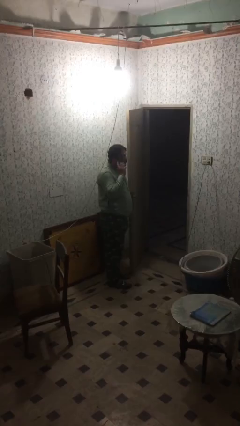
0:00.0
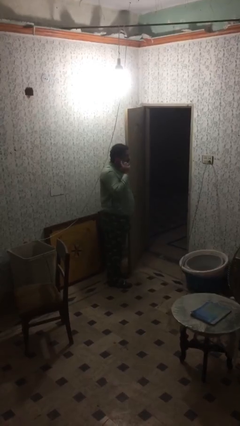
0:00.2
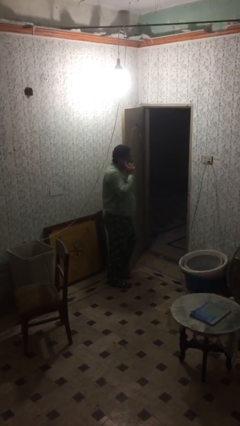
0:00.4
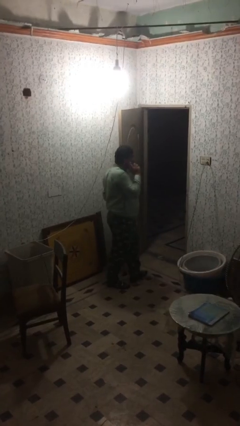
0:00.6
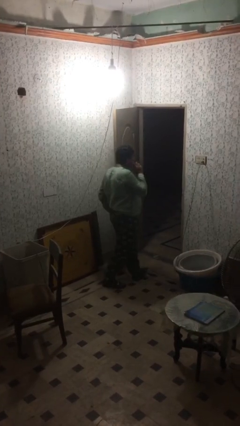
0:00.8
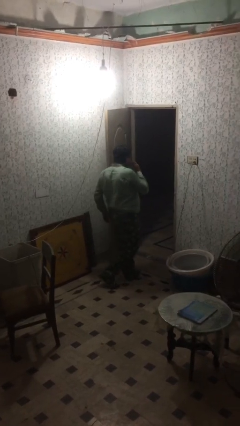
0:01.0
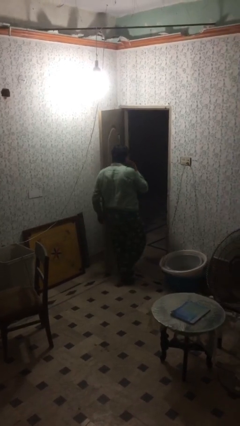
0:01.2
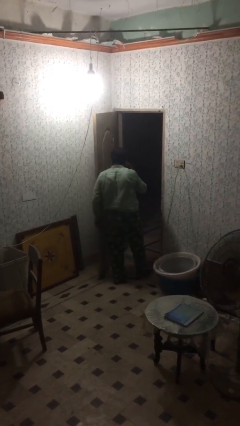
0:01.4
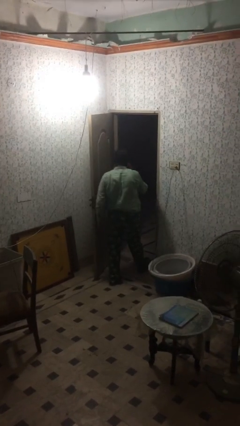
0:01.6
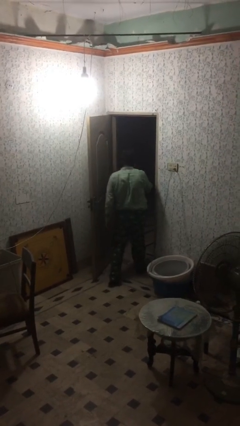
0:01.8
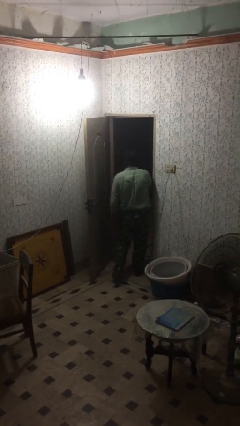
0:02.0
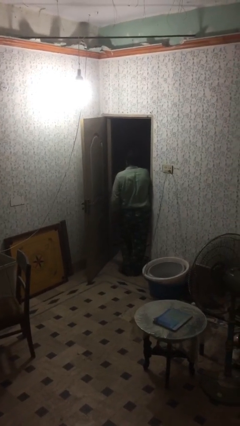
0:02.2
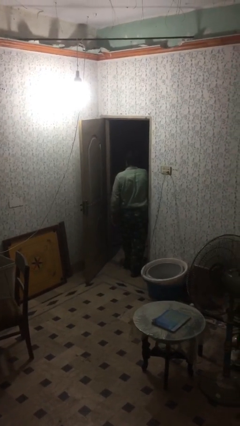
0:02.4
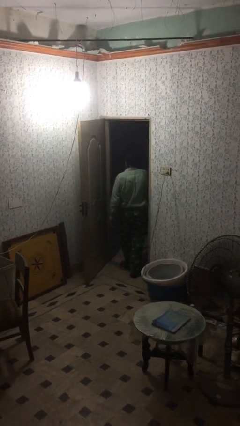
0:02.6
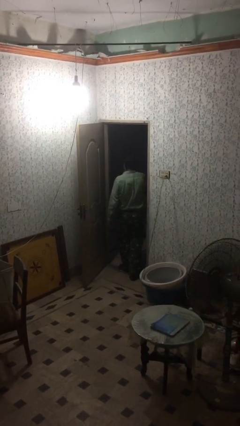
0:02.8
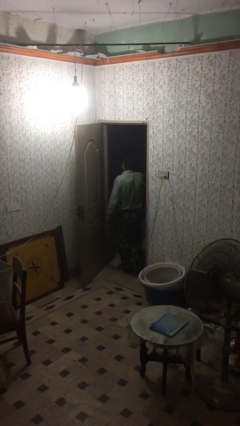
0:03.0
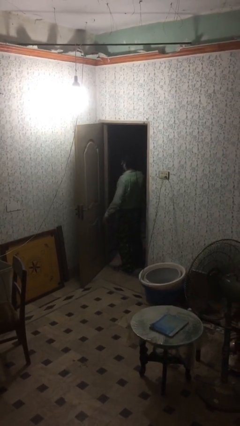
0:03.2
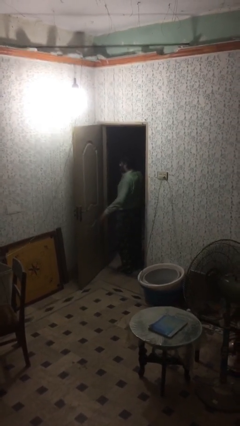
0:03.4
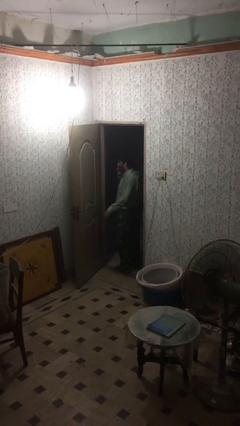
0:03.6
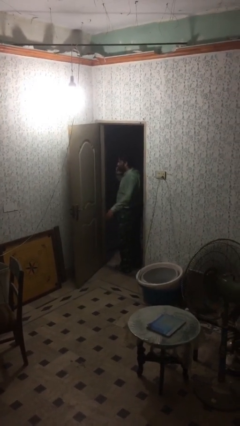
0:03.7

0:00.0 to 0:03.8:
person exits scene through structure

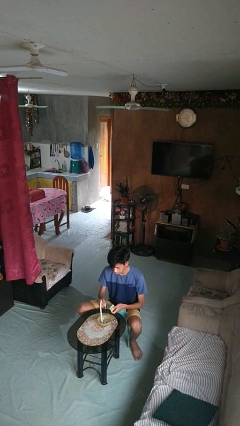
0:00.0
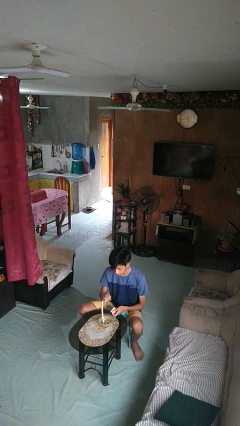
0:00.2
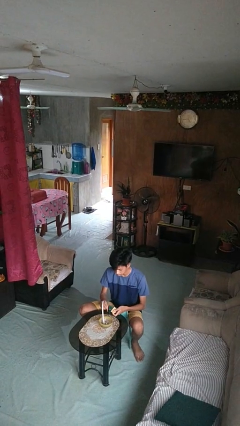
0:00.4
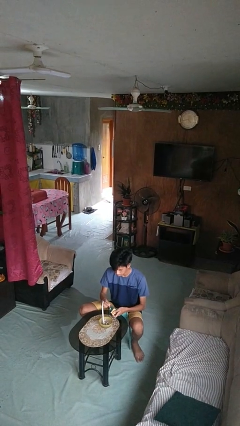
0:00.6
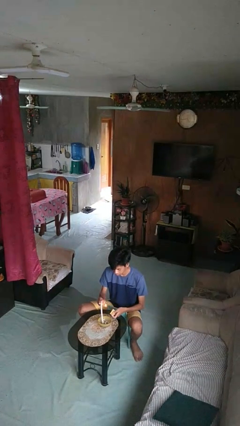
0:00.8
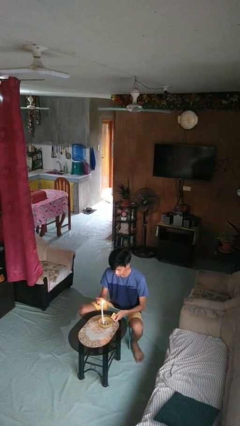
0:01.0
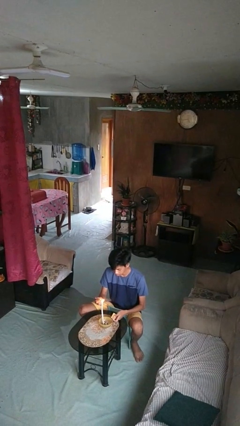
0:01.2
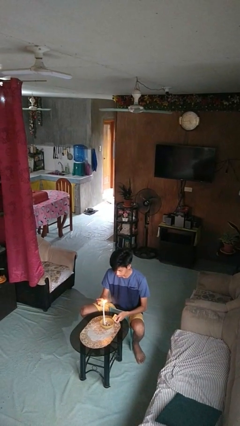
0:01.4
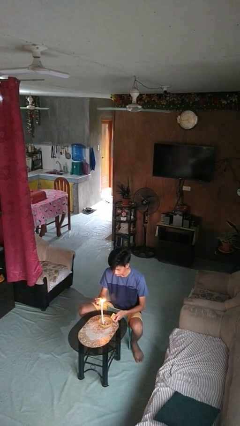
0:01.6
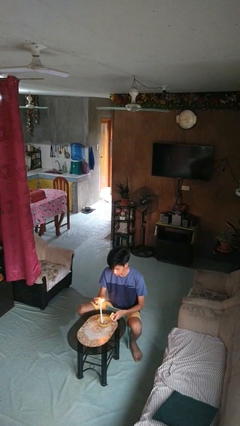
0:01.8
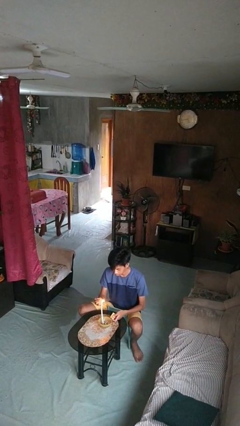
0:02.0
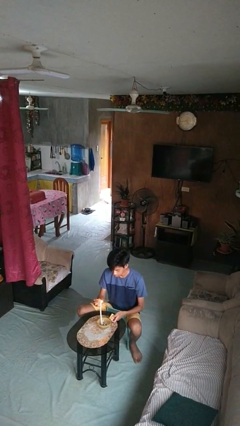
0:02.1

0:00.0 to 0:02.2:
person lights candle

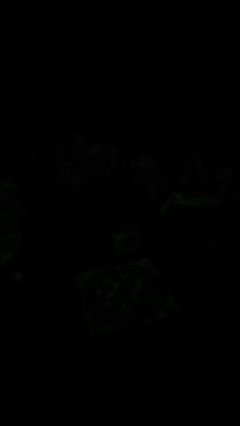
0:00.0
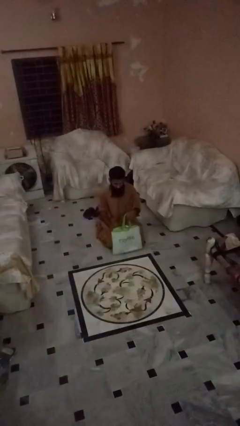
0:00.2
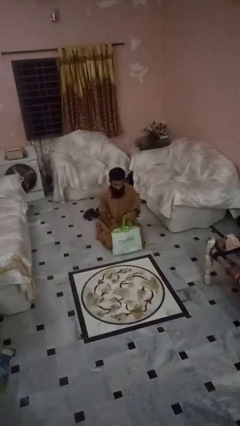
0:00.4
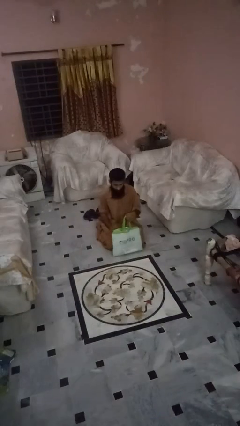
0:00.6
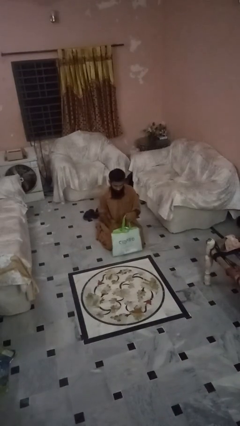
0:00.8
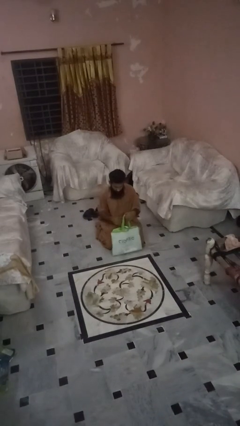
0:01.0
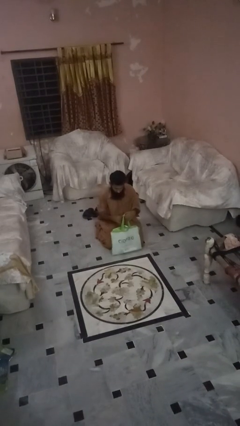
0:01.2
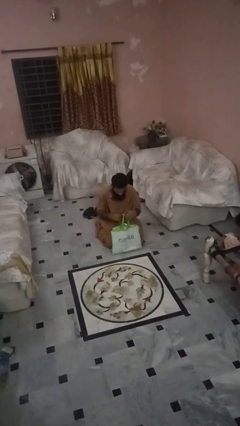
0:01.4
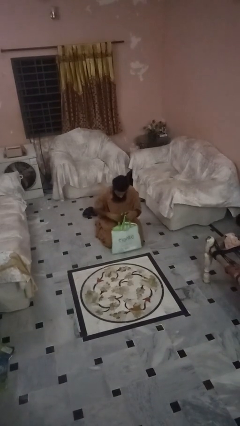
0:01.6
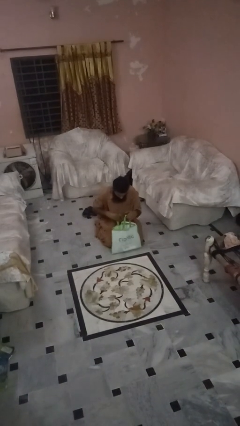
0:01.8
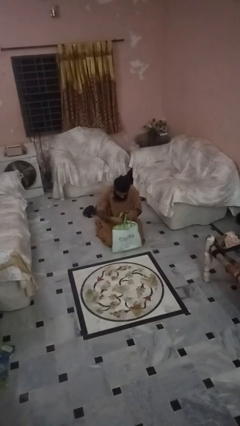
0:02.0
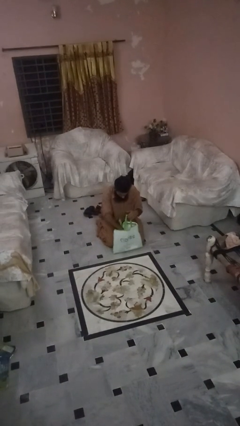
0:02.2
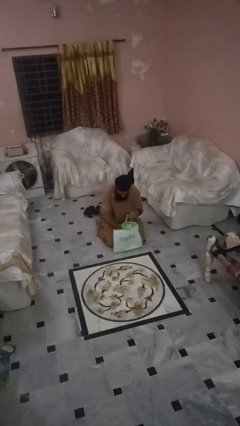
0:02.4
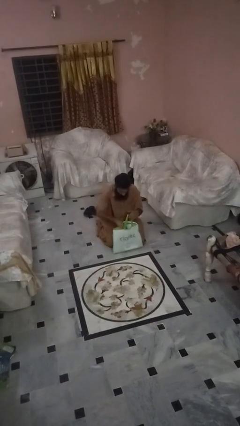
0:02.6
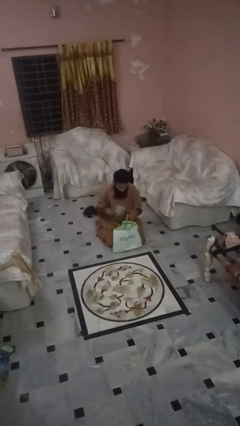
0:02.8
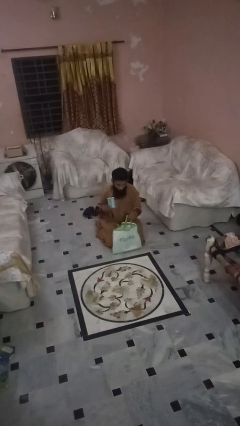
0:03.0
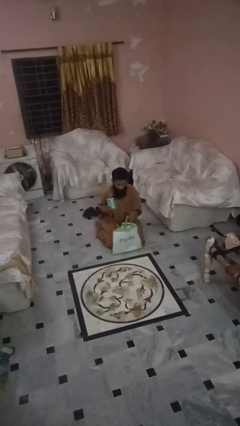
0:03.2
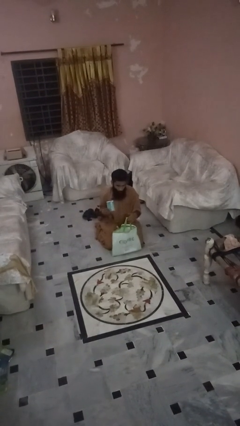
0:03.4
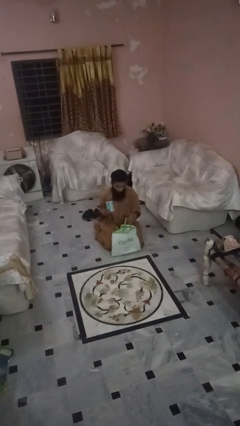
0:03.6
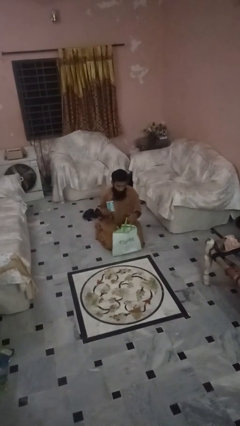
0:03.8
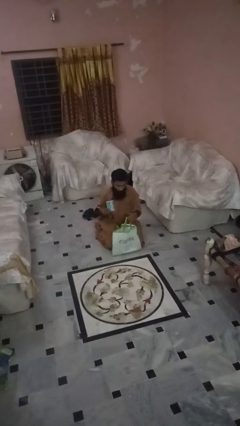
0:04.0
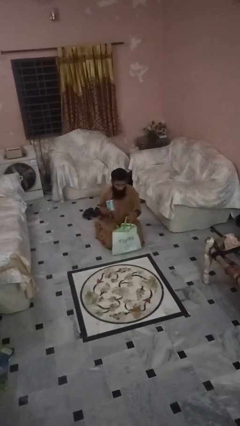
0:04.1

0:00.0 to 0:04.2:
person takes object from bag

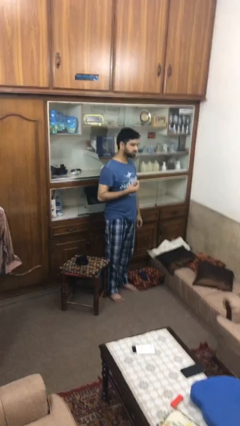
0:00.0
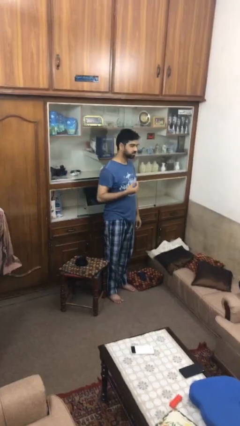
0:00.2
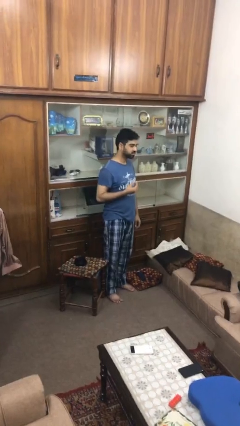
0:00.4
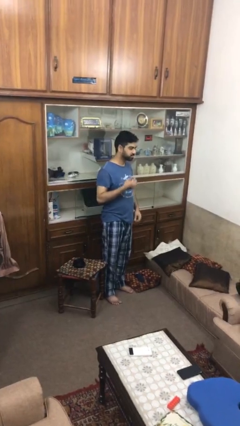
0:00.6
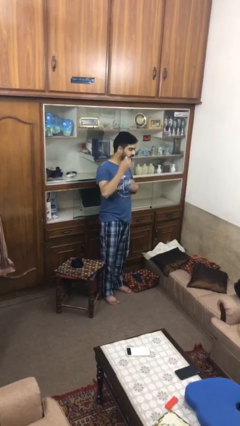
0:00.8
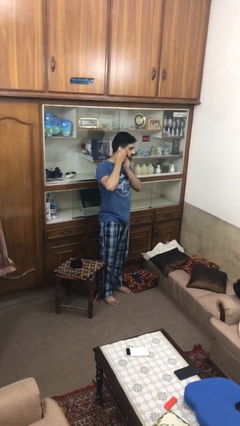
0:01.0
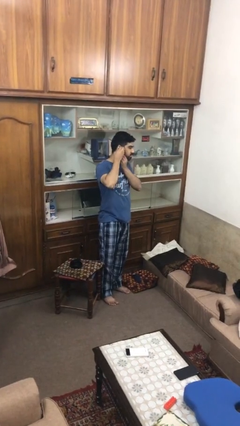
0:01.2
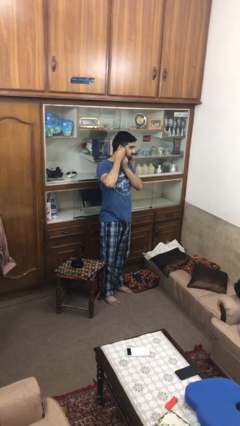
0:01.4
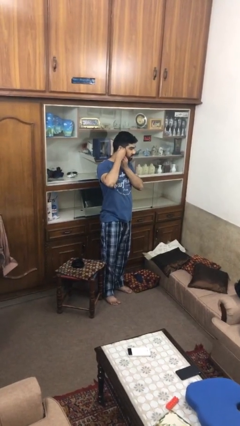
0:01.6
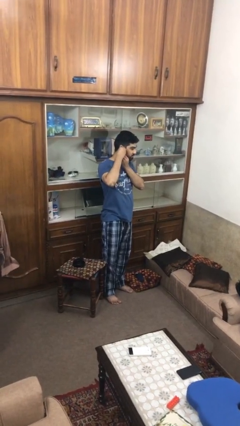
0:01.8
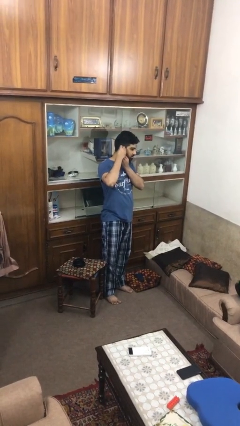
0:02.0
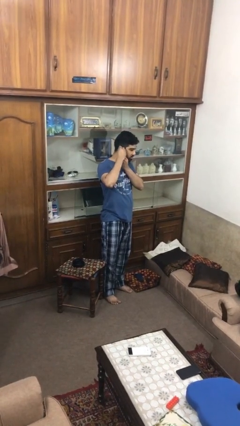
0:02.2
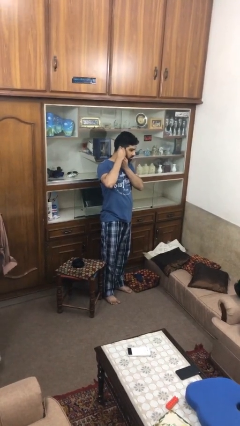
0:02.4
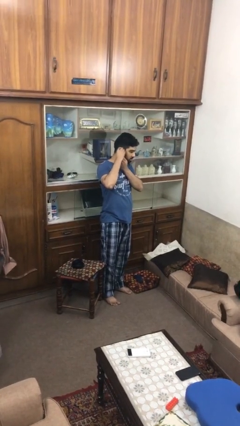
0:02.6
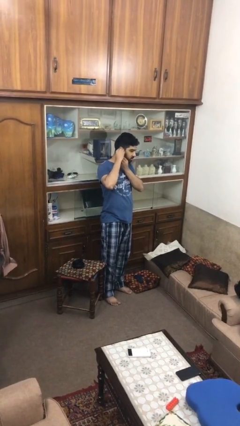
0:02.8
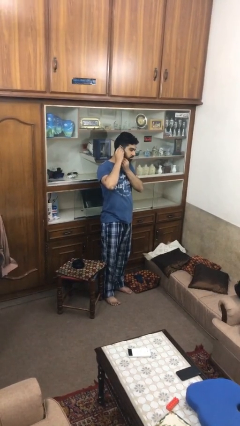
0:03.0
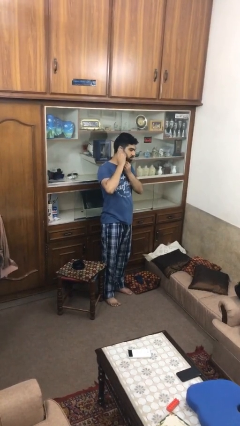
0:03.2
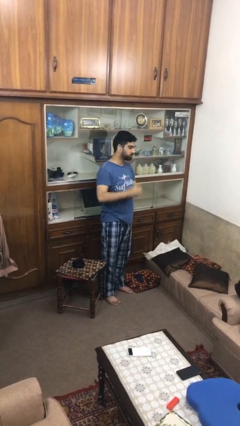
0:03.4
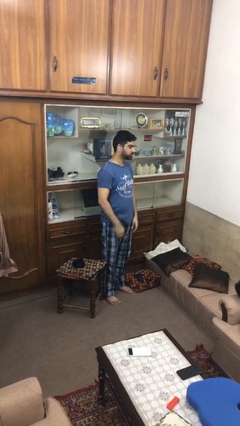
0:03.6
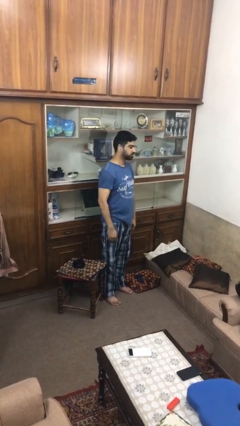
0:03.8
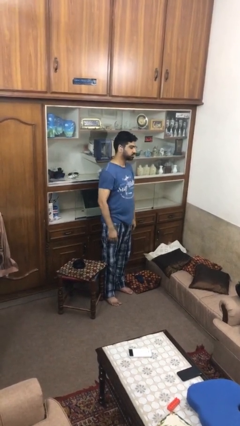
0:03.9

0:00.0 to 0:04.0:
person puts on earrings

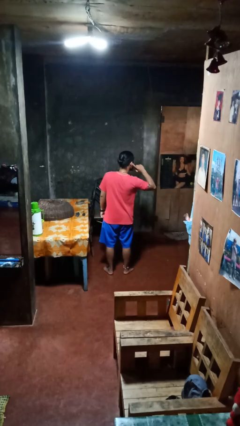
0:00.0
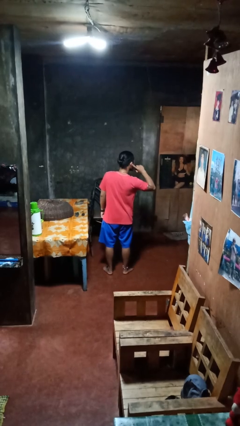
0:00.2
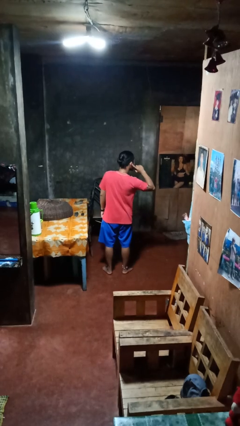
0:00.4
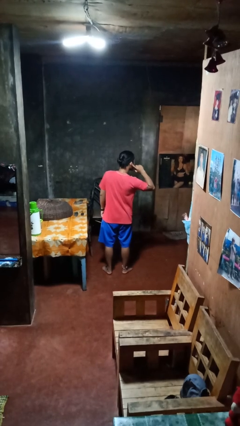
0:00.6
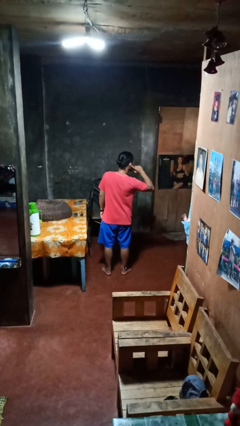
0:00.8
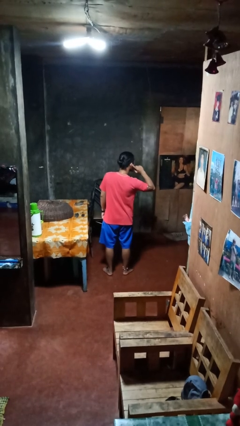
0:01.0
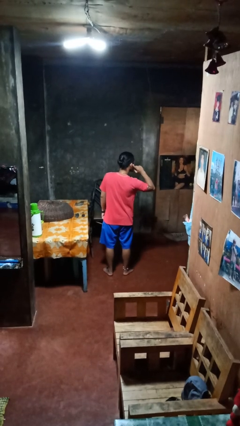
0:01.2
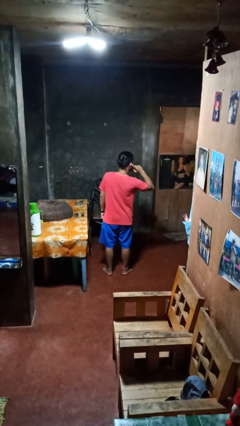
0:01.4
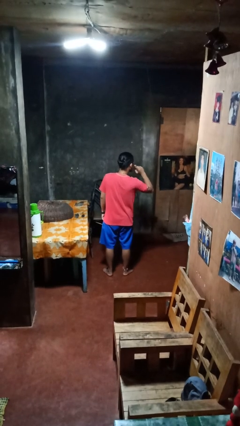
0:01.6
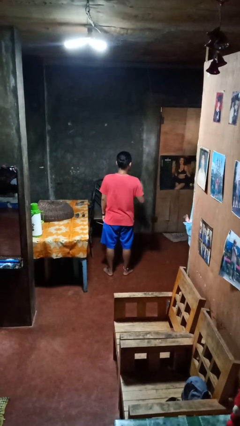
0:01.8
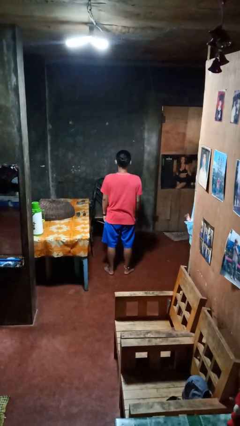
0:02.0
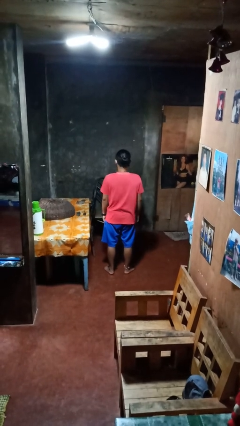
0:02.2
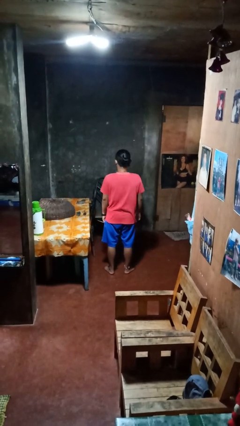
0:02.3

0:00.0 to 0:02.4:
person gestures listen closely

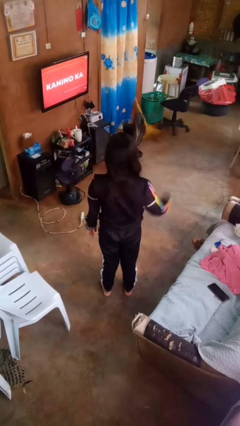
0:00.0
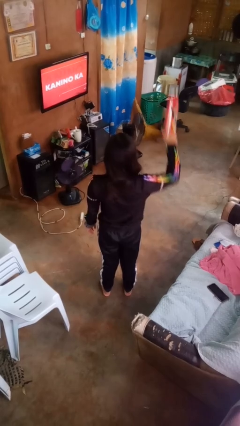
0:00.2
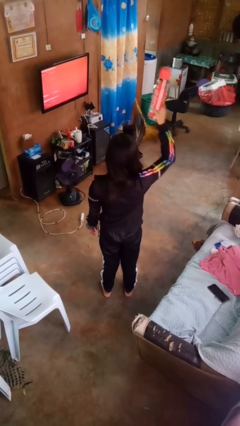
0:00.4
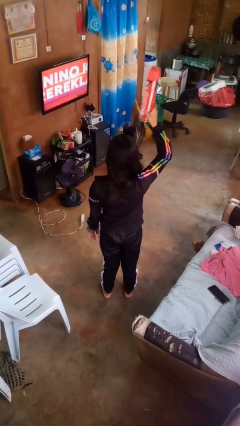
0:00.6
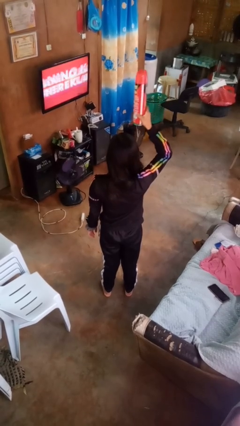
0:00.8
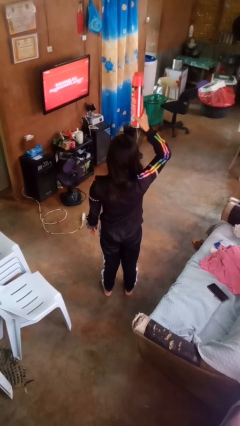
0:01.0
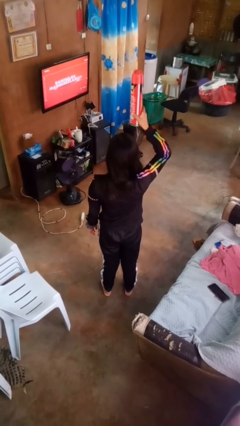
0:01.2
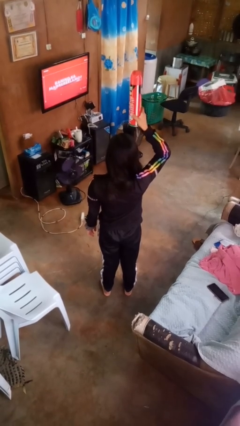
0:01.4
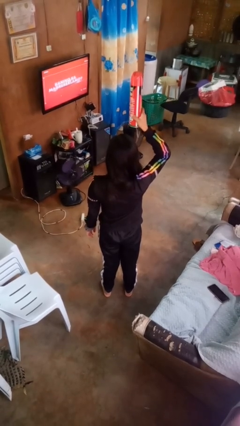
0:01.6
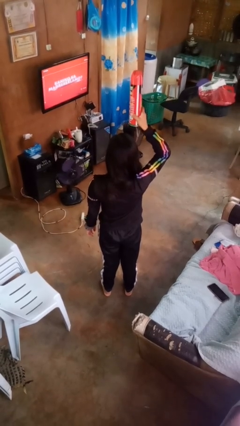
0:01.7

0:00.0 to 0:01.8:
person holds object above head
